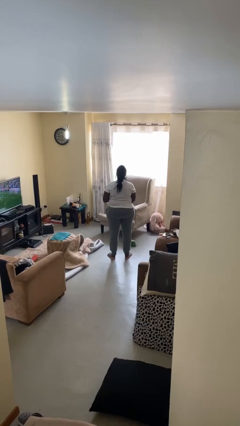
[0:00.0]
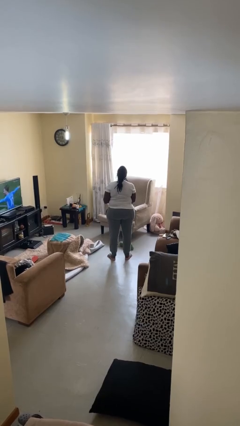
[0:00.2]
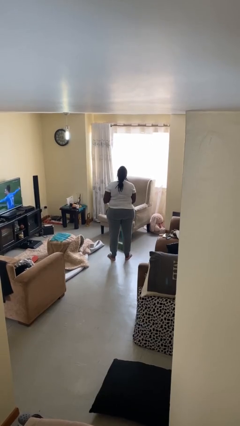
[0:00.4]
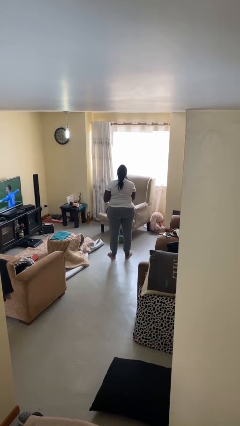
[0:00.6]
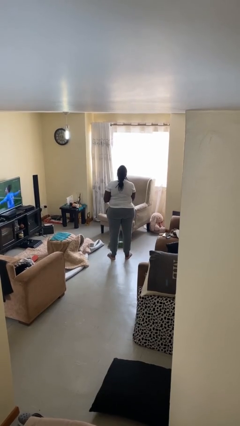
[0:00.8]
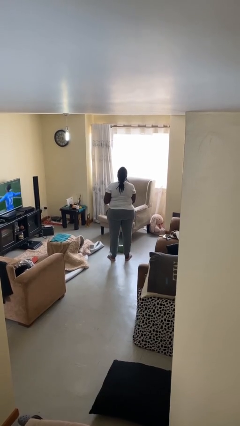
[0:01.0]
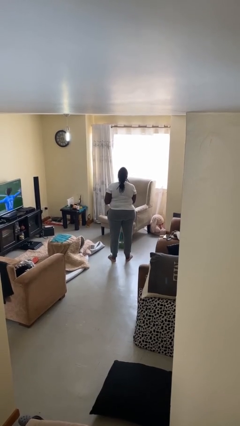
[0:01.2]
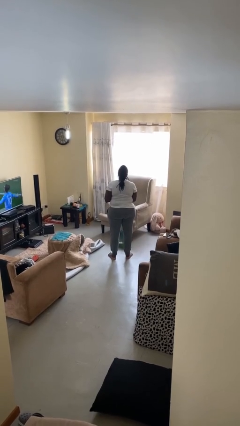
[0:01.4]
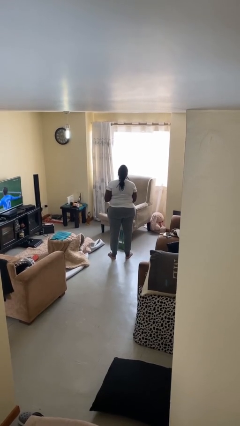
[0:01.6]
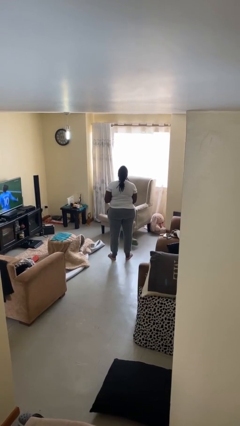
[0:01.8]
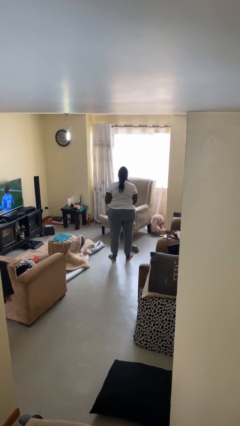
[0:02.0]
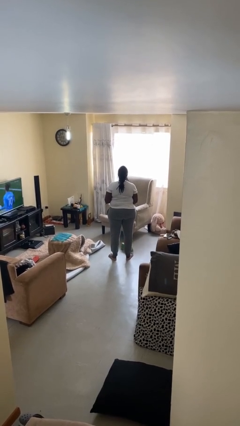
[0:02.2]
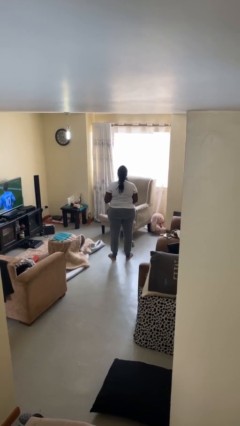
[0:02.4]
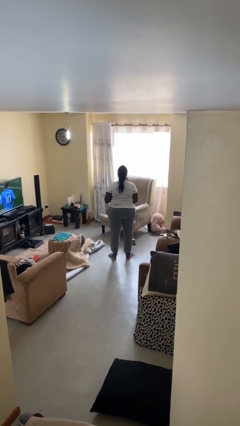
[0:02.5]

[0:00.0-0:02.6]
person sweeps floor

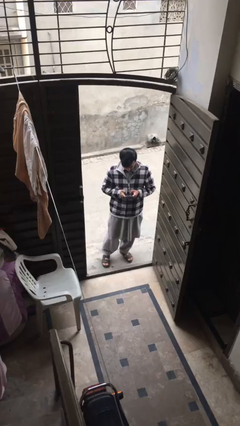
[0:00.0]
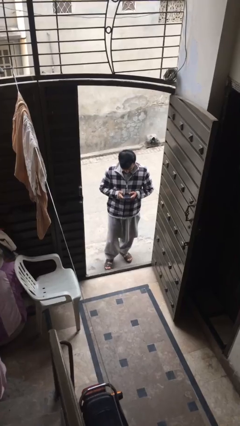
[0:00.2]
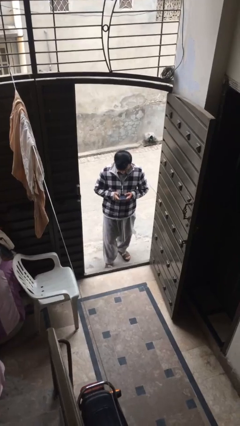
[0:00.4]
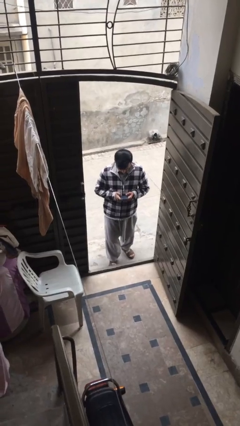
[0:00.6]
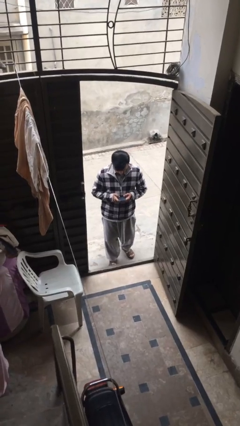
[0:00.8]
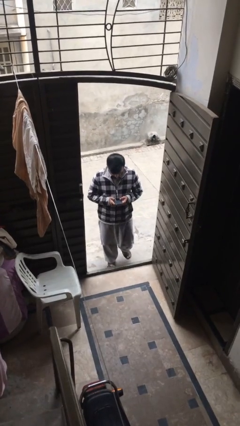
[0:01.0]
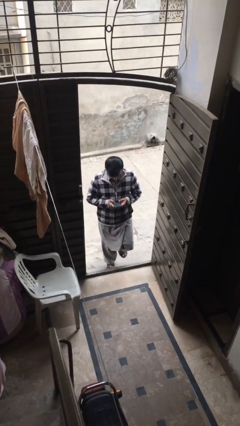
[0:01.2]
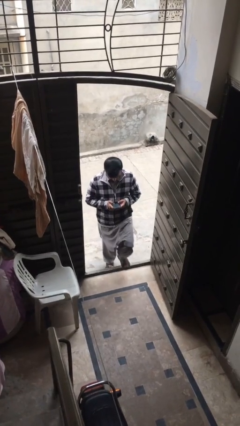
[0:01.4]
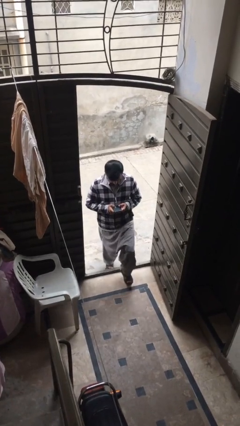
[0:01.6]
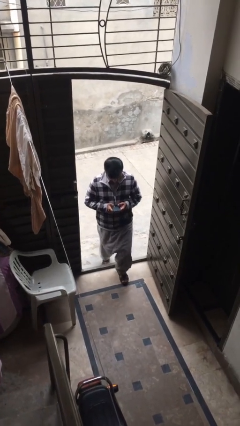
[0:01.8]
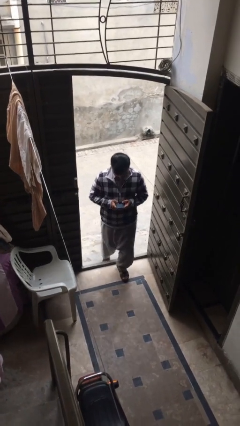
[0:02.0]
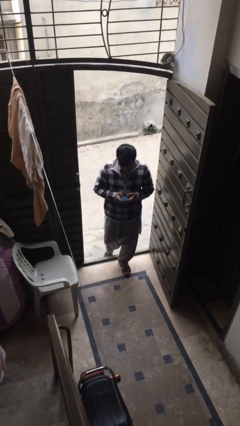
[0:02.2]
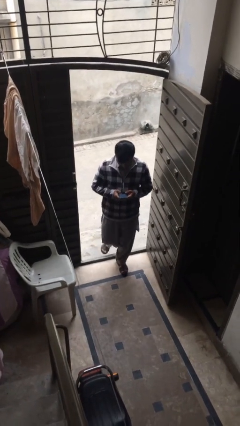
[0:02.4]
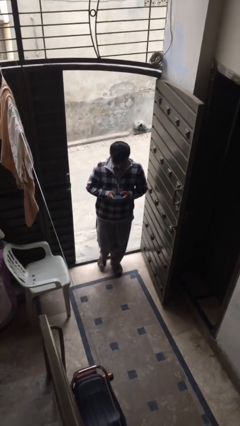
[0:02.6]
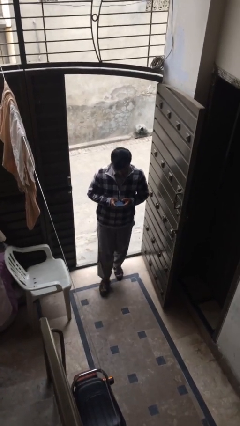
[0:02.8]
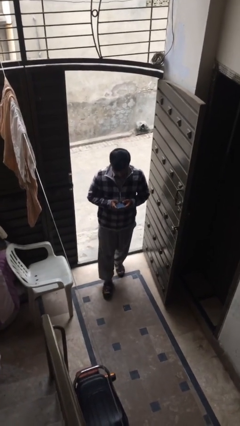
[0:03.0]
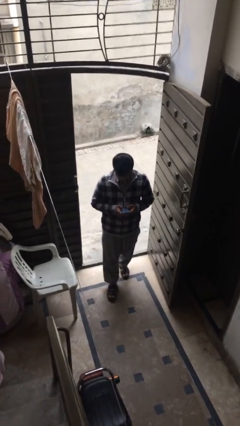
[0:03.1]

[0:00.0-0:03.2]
person enters scene through structure

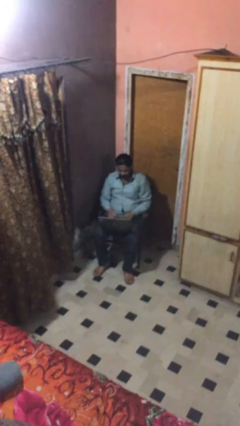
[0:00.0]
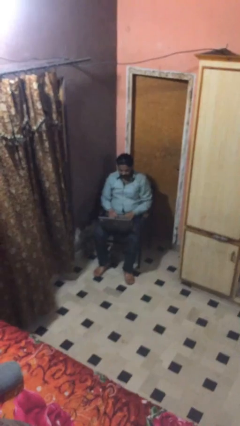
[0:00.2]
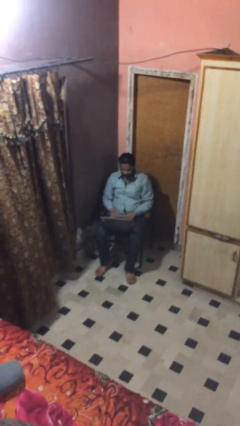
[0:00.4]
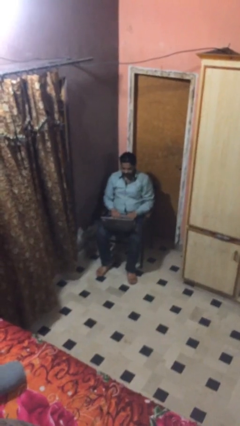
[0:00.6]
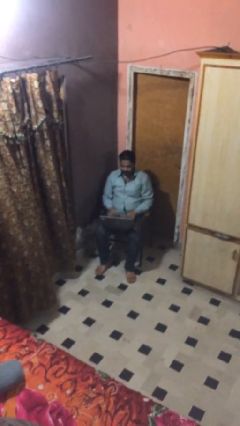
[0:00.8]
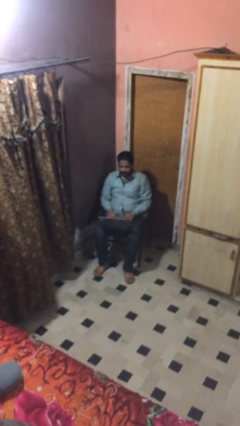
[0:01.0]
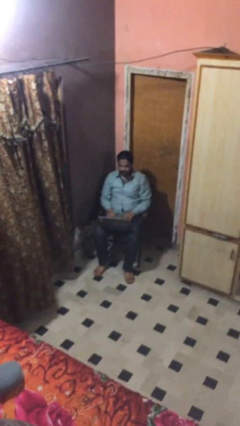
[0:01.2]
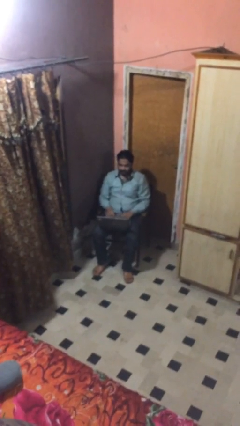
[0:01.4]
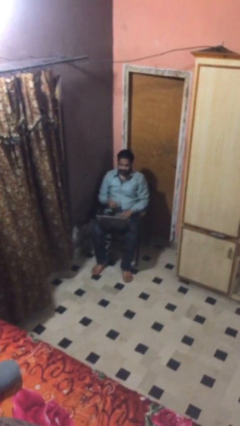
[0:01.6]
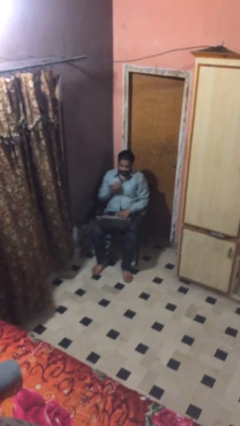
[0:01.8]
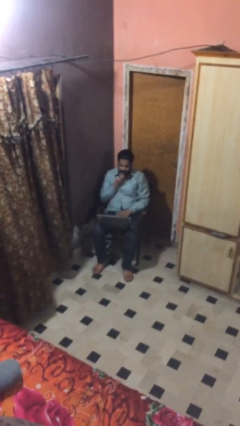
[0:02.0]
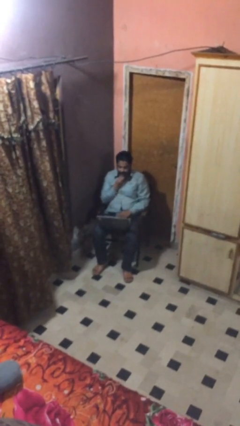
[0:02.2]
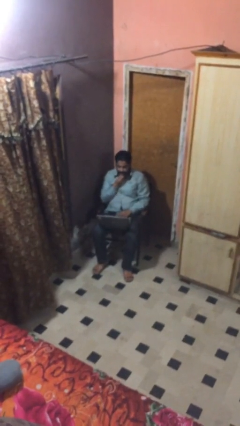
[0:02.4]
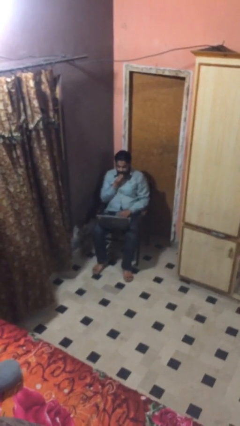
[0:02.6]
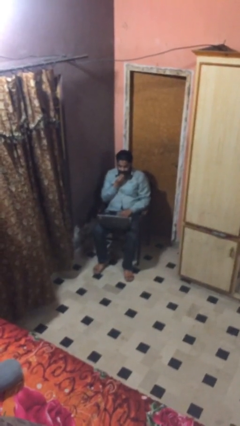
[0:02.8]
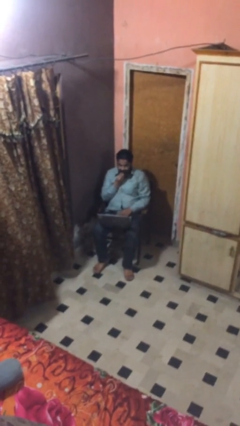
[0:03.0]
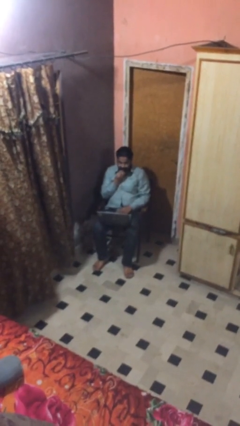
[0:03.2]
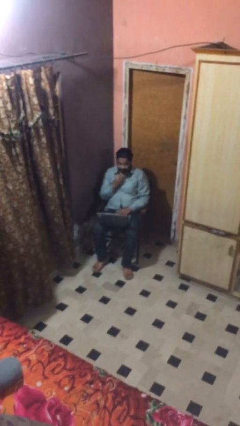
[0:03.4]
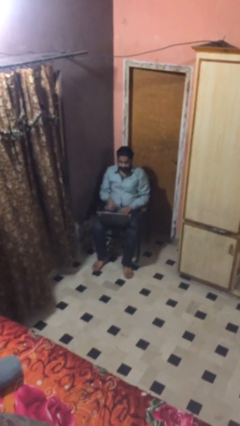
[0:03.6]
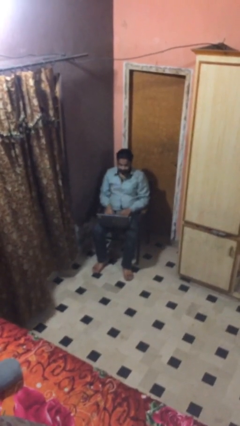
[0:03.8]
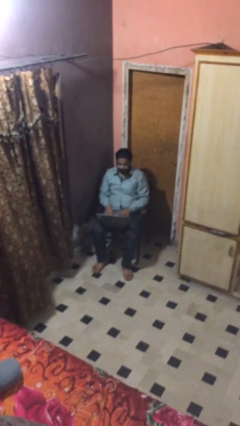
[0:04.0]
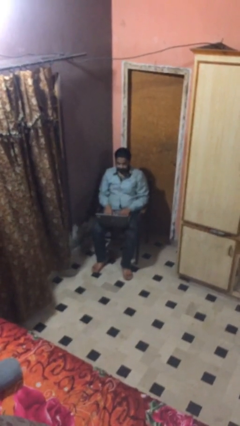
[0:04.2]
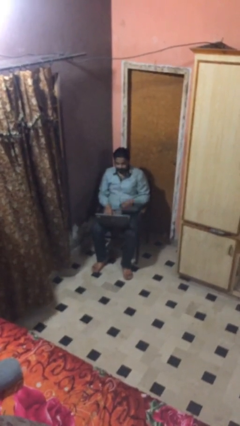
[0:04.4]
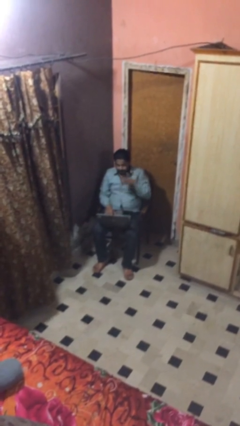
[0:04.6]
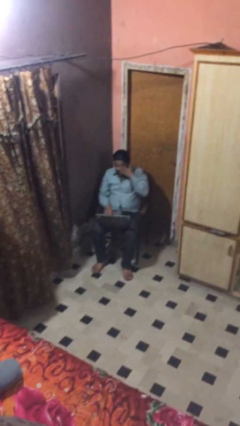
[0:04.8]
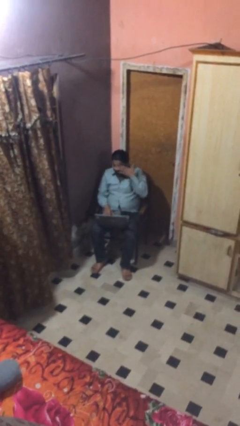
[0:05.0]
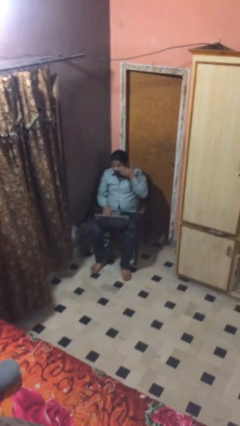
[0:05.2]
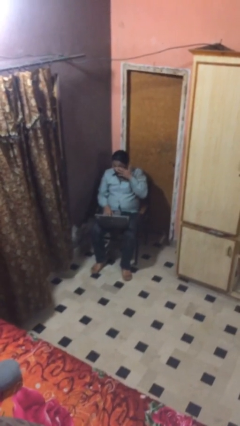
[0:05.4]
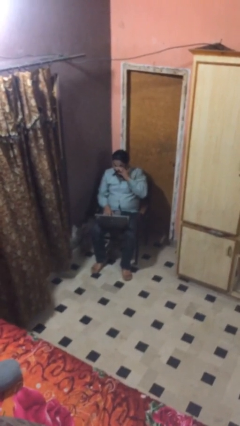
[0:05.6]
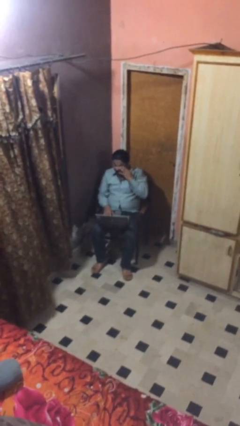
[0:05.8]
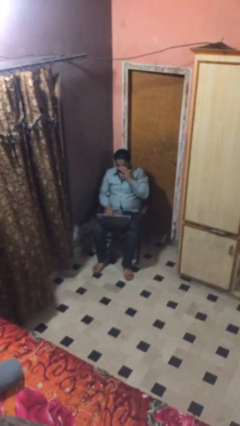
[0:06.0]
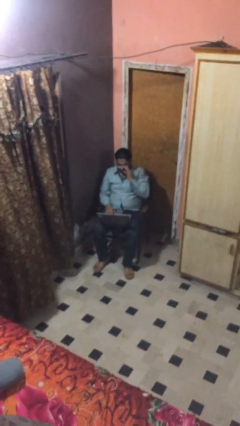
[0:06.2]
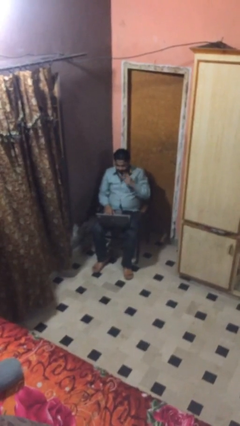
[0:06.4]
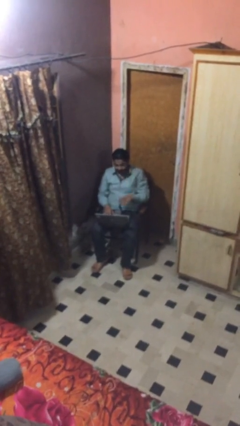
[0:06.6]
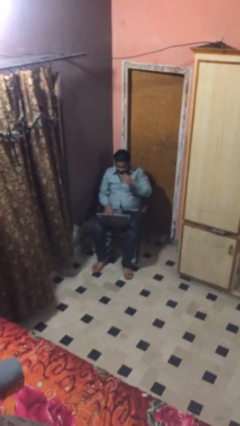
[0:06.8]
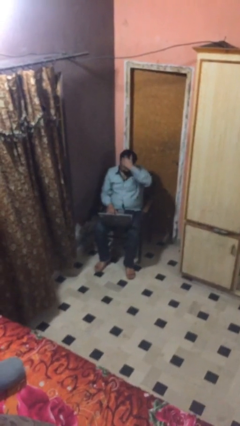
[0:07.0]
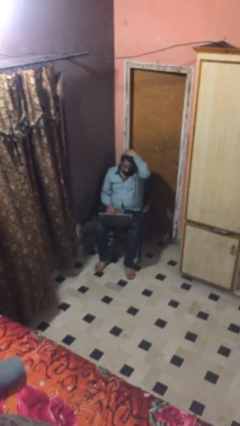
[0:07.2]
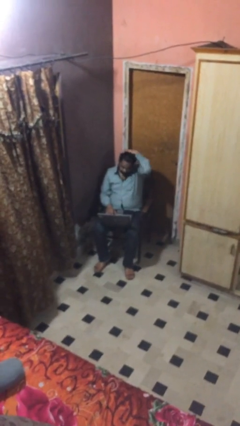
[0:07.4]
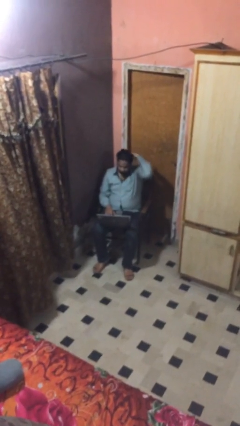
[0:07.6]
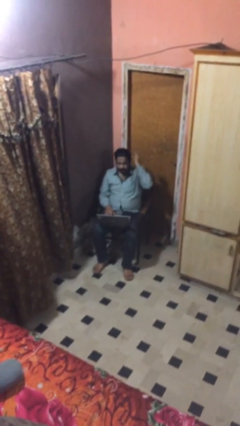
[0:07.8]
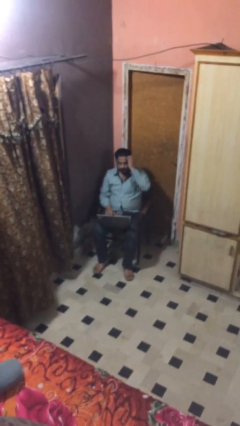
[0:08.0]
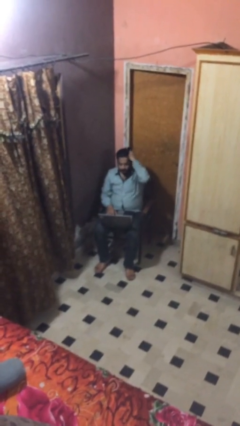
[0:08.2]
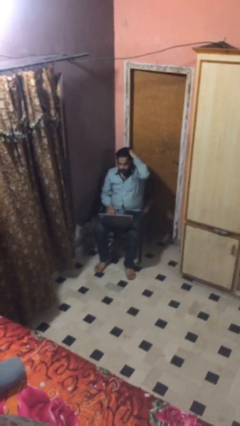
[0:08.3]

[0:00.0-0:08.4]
person interacts with laptop

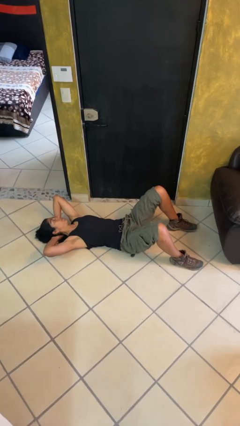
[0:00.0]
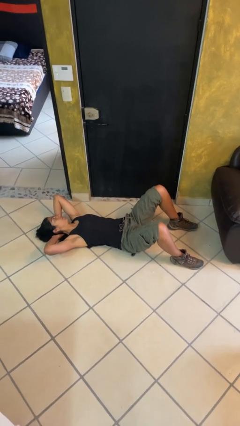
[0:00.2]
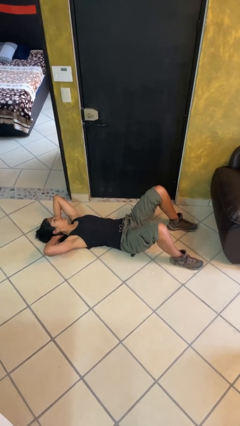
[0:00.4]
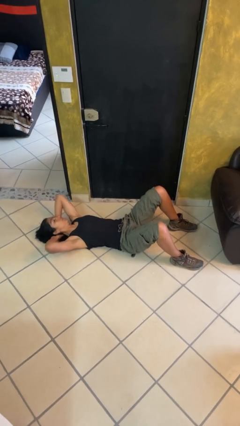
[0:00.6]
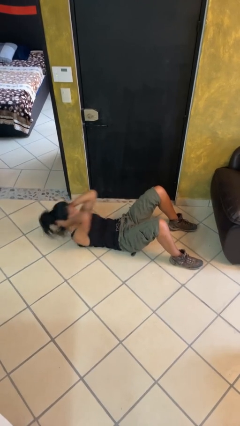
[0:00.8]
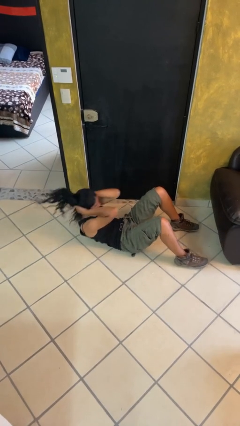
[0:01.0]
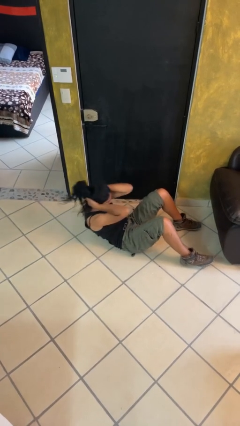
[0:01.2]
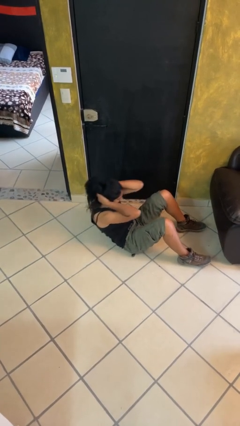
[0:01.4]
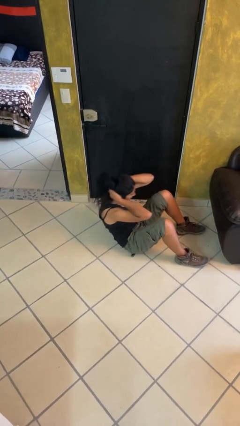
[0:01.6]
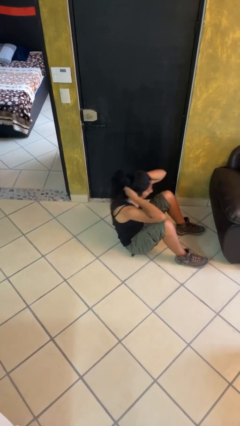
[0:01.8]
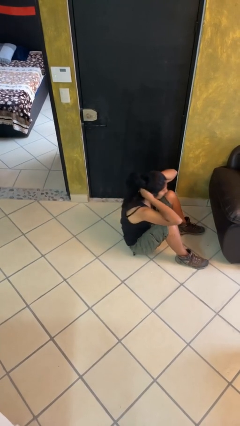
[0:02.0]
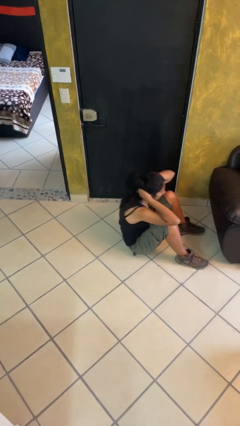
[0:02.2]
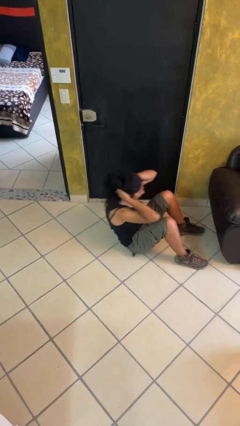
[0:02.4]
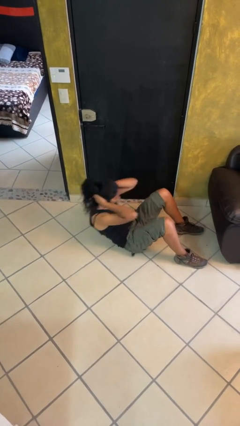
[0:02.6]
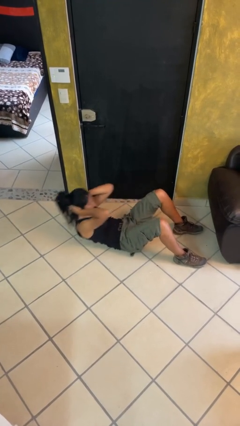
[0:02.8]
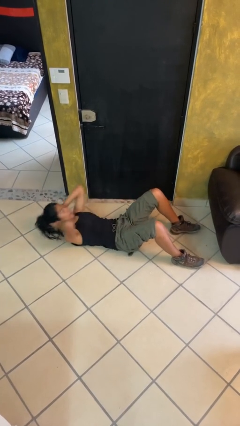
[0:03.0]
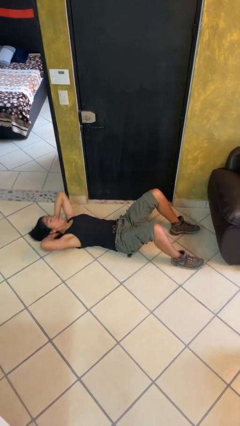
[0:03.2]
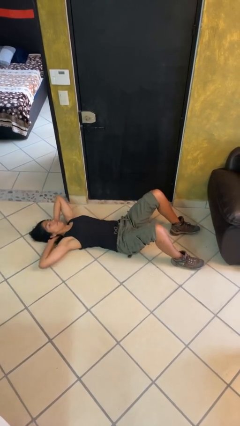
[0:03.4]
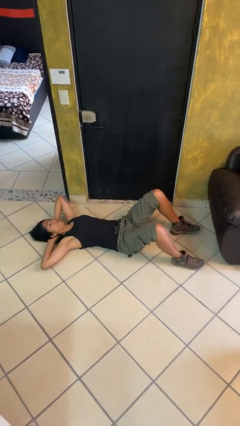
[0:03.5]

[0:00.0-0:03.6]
person exercises with situp

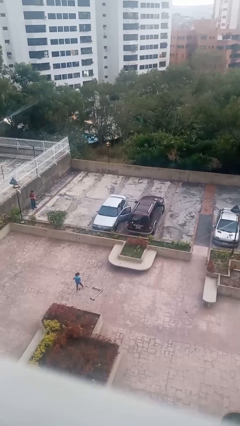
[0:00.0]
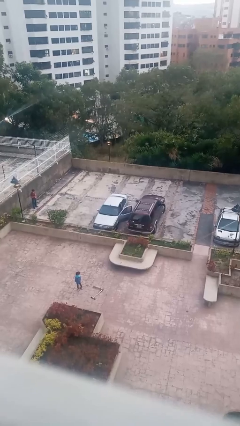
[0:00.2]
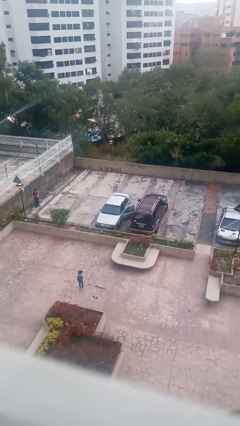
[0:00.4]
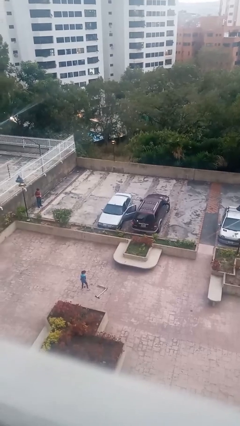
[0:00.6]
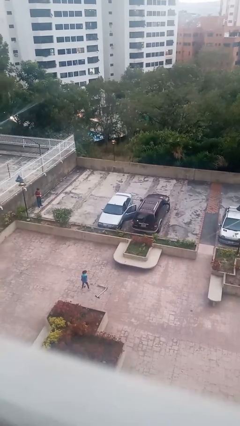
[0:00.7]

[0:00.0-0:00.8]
person enters car
